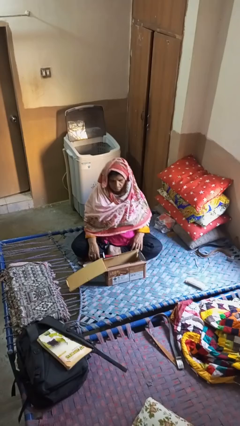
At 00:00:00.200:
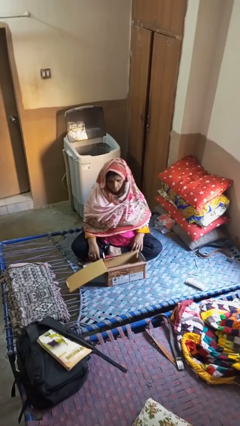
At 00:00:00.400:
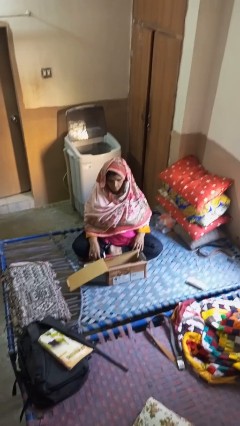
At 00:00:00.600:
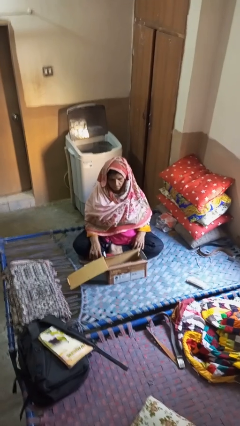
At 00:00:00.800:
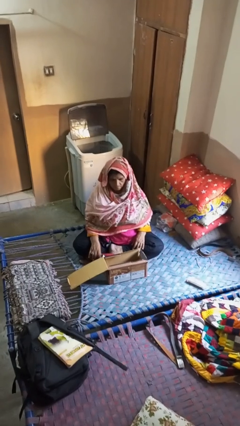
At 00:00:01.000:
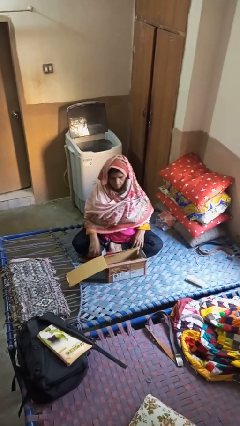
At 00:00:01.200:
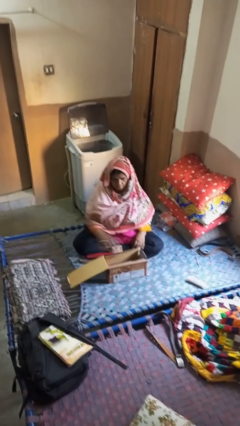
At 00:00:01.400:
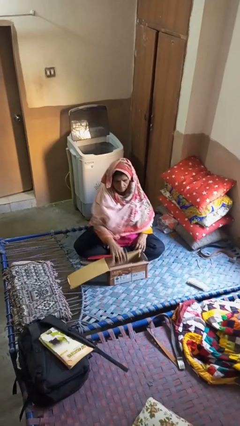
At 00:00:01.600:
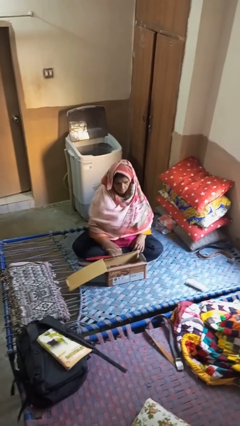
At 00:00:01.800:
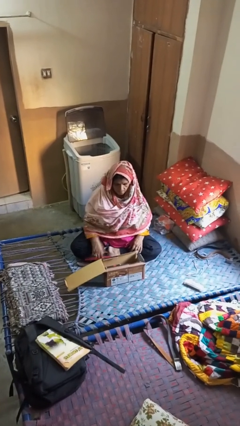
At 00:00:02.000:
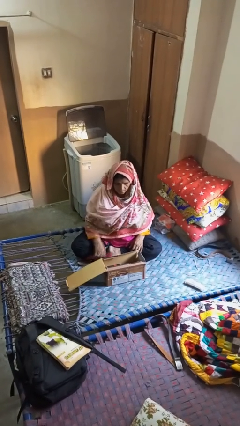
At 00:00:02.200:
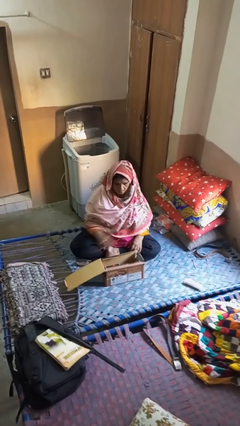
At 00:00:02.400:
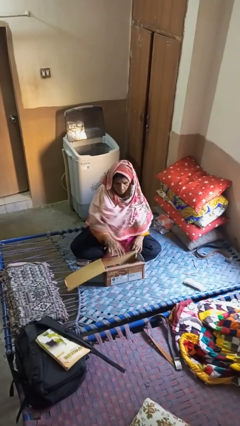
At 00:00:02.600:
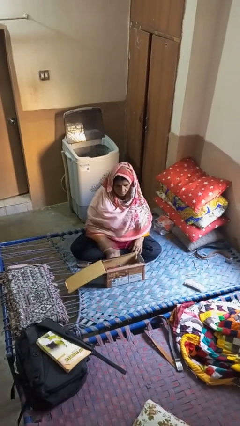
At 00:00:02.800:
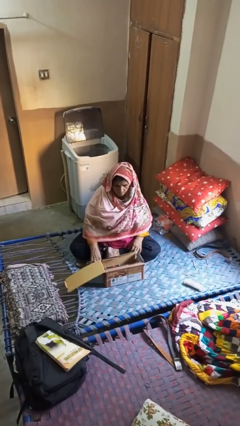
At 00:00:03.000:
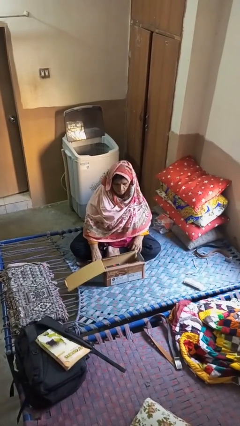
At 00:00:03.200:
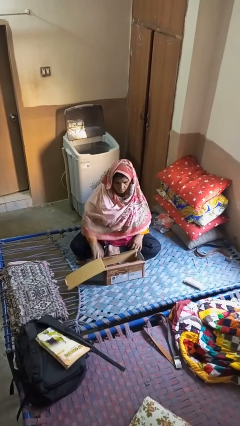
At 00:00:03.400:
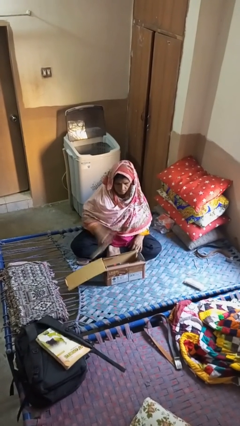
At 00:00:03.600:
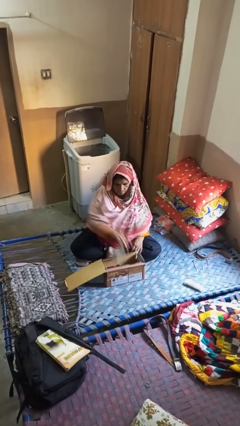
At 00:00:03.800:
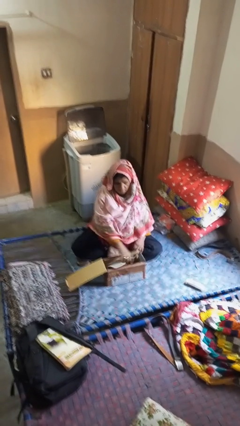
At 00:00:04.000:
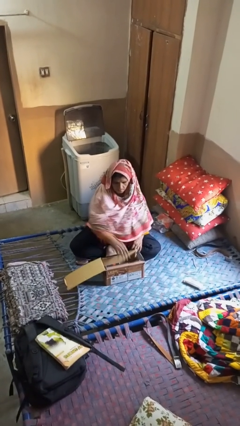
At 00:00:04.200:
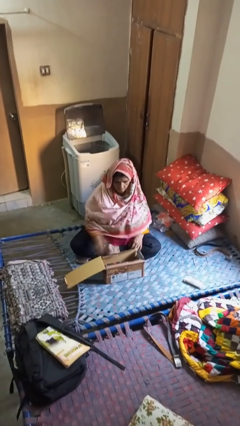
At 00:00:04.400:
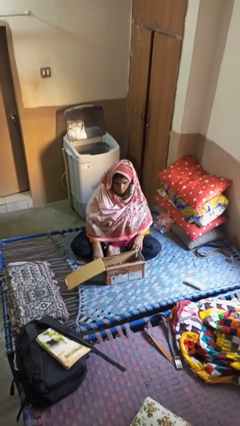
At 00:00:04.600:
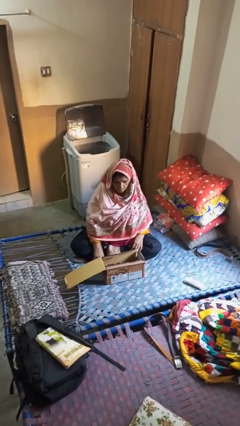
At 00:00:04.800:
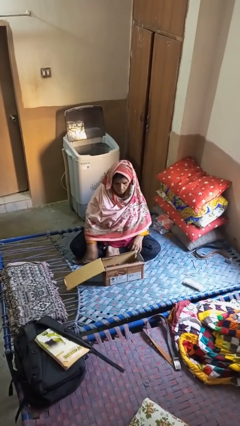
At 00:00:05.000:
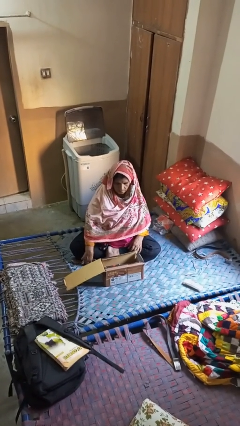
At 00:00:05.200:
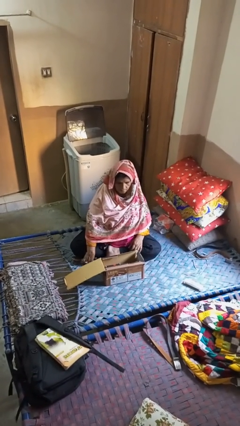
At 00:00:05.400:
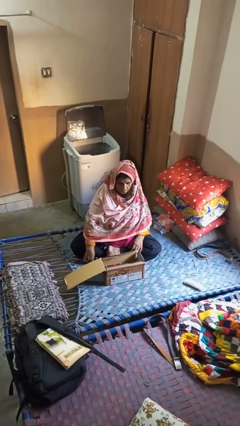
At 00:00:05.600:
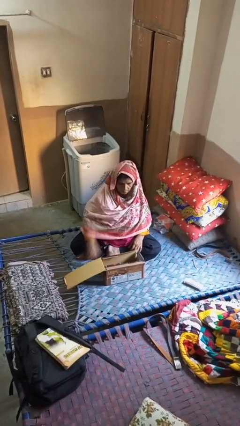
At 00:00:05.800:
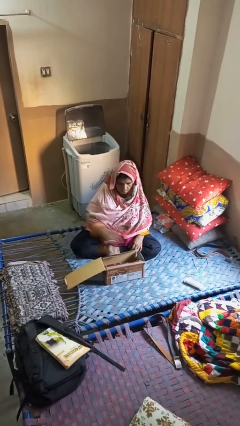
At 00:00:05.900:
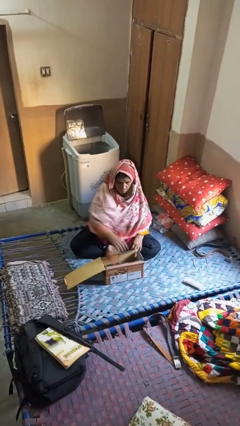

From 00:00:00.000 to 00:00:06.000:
person puts object into box

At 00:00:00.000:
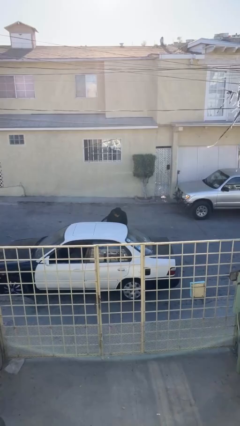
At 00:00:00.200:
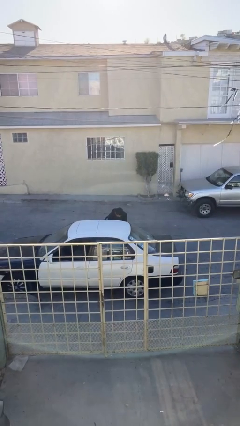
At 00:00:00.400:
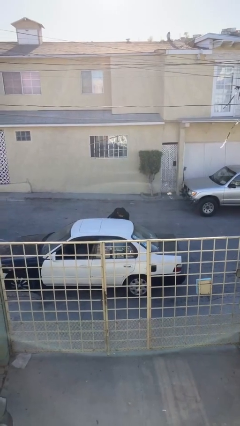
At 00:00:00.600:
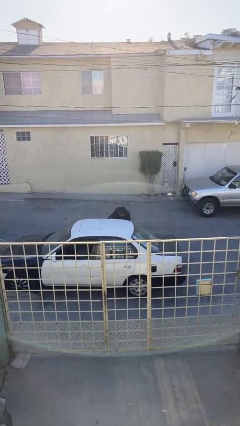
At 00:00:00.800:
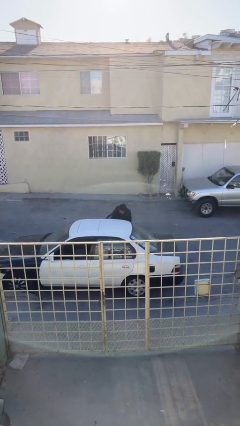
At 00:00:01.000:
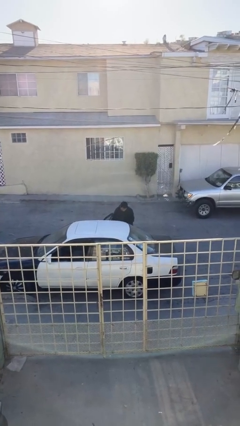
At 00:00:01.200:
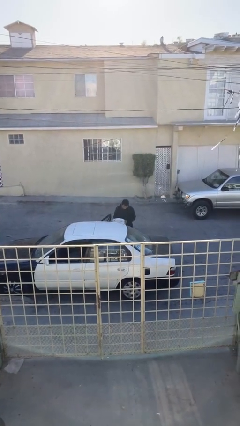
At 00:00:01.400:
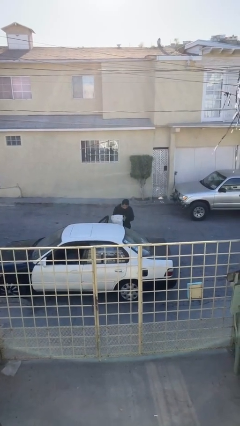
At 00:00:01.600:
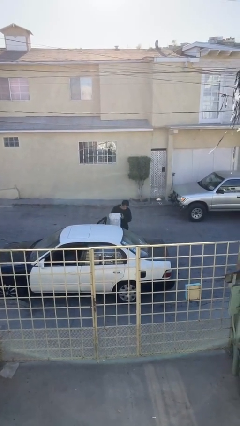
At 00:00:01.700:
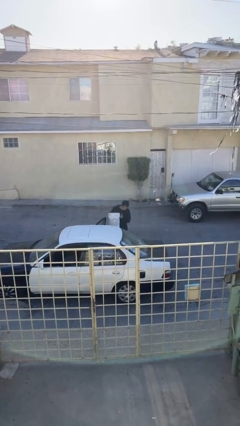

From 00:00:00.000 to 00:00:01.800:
person unloads car

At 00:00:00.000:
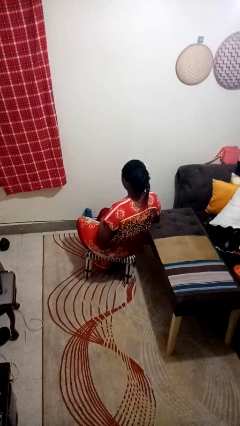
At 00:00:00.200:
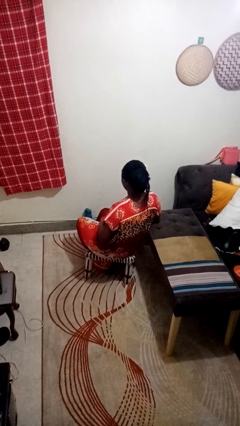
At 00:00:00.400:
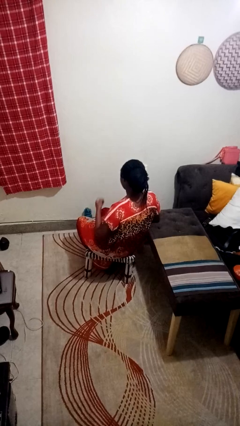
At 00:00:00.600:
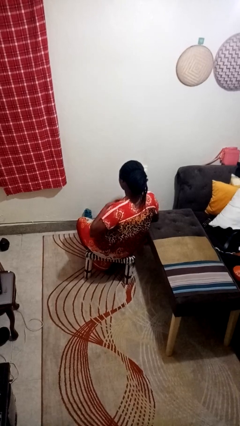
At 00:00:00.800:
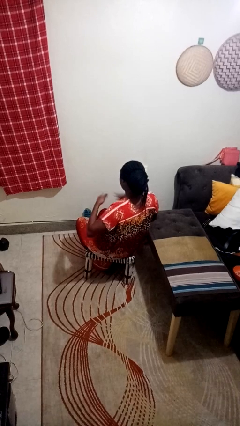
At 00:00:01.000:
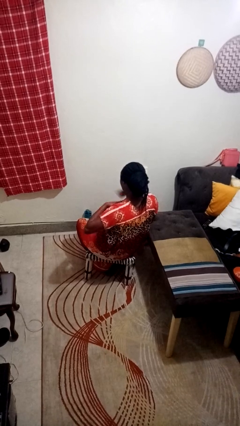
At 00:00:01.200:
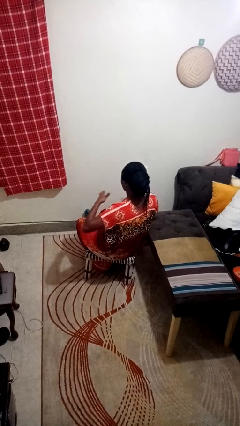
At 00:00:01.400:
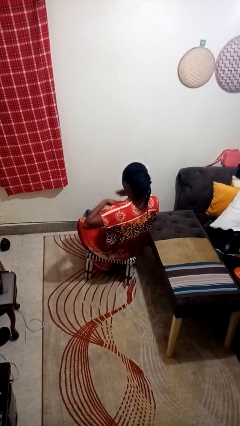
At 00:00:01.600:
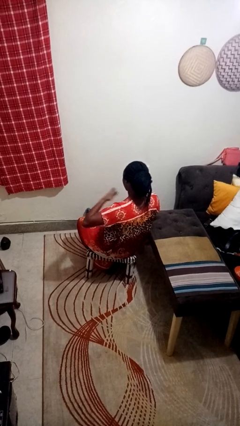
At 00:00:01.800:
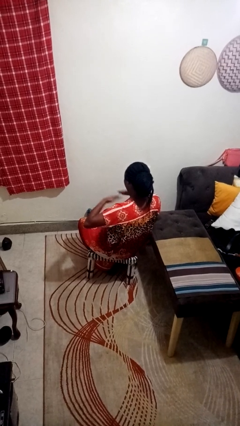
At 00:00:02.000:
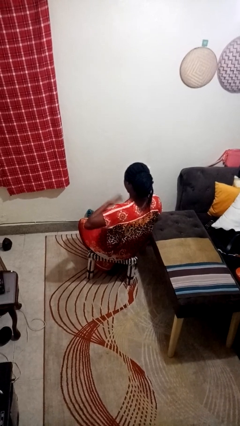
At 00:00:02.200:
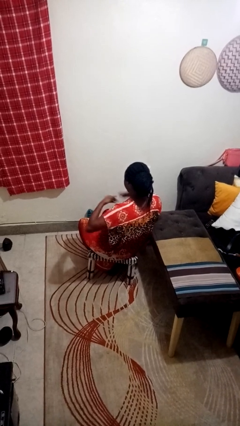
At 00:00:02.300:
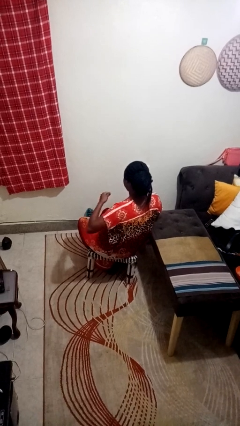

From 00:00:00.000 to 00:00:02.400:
person drums on chest

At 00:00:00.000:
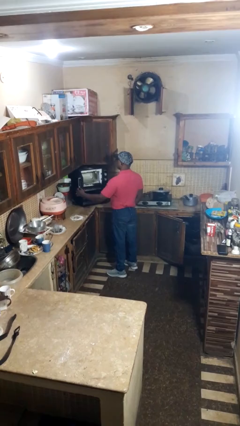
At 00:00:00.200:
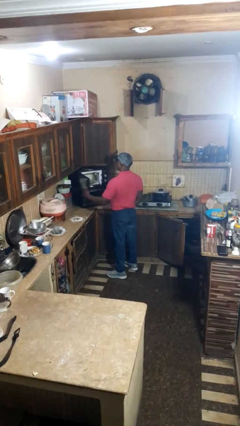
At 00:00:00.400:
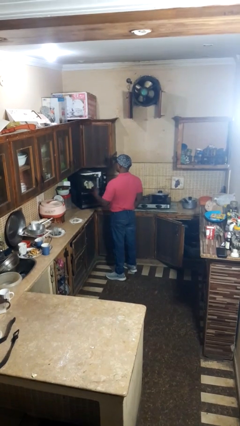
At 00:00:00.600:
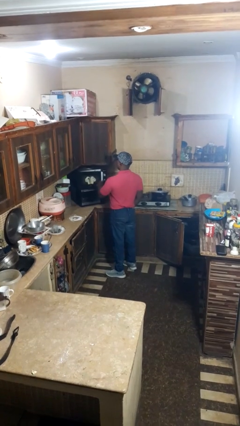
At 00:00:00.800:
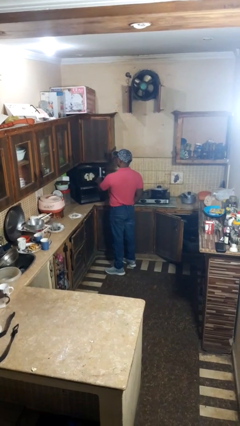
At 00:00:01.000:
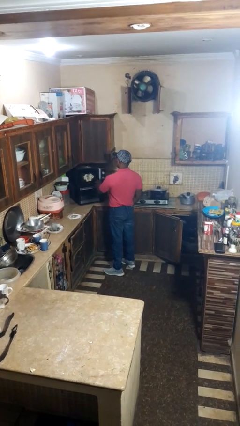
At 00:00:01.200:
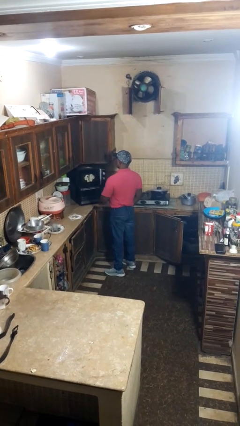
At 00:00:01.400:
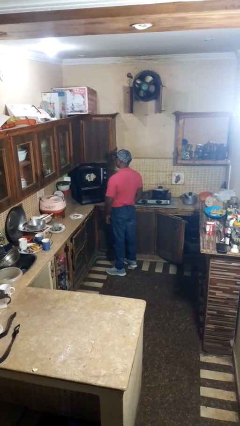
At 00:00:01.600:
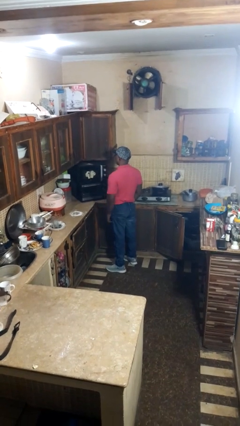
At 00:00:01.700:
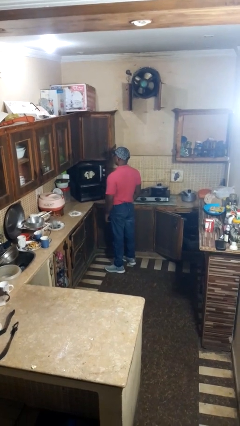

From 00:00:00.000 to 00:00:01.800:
person closes microwave

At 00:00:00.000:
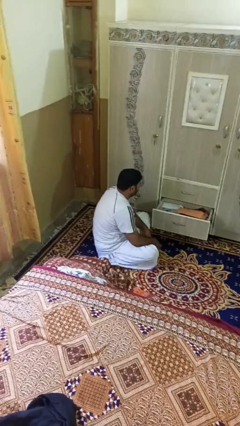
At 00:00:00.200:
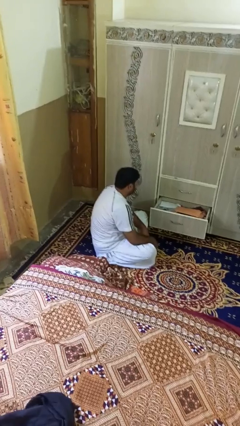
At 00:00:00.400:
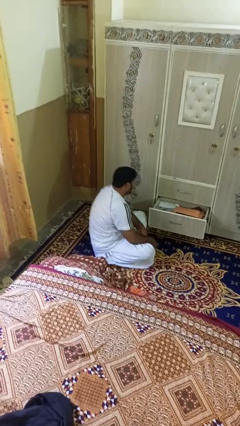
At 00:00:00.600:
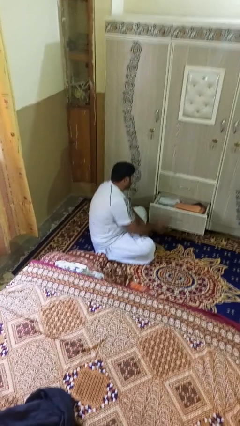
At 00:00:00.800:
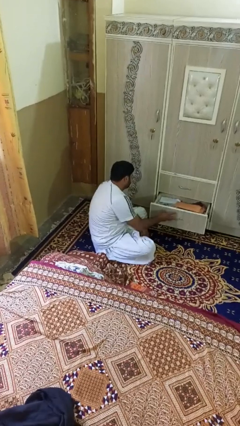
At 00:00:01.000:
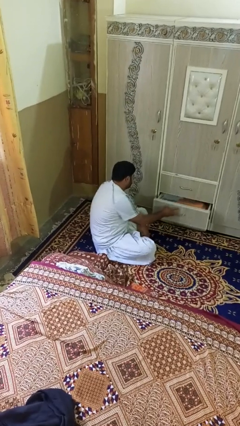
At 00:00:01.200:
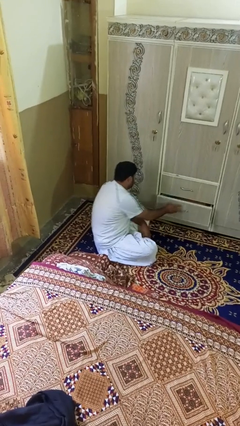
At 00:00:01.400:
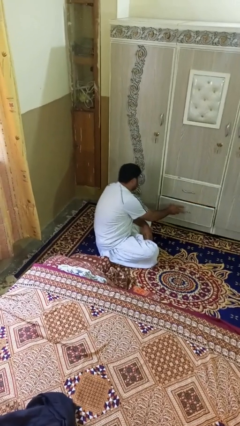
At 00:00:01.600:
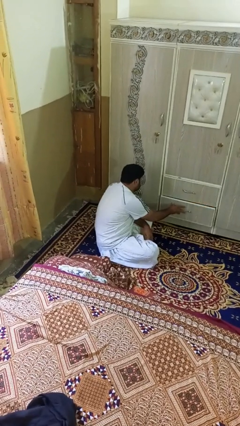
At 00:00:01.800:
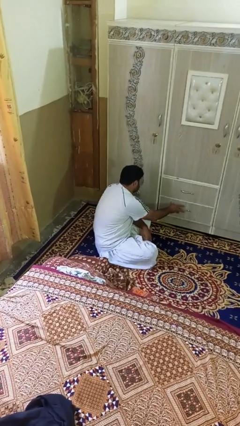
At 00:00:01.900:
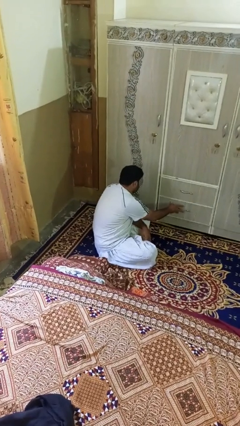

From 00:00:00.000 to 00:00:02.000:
person closes dresser drawer

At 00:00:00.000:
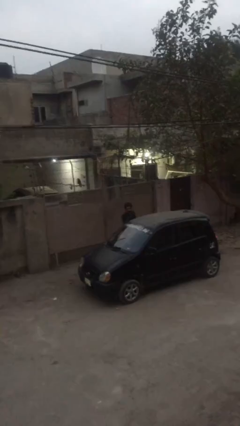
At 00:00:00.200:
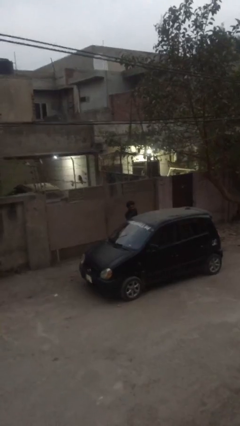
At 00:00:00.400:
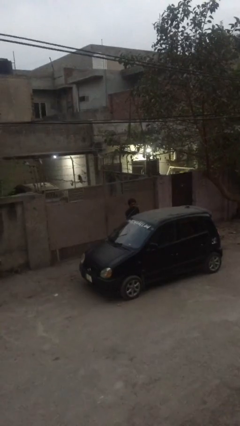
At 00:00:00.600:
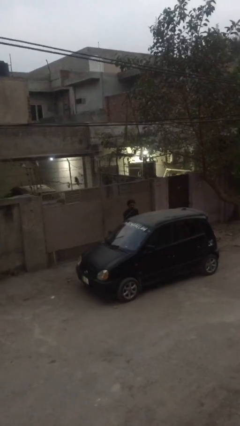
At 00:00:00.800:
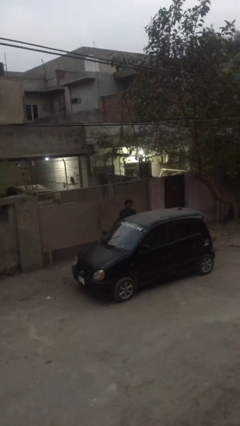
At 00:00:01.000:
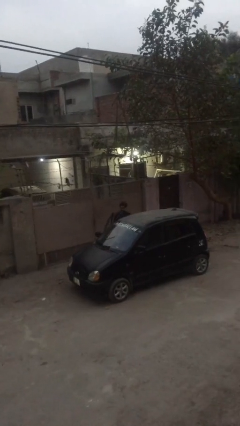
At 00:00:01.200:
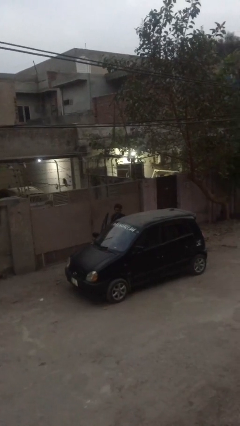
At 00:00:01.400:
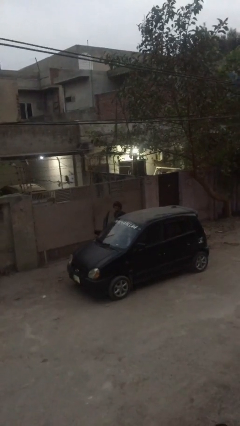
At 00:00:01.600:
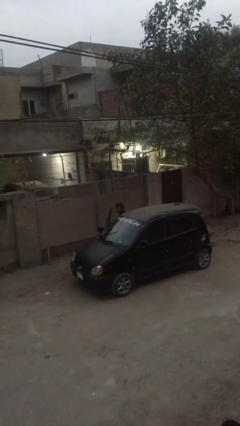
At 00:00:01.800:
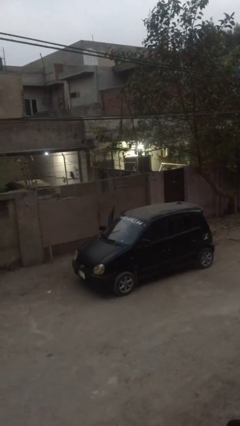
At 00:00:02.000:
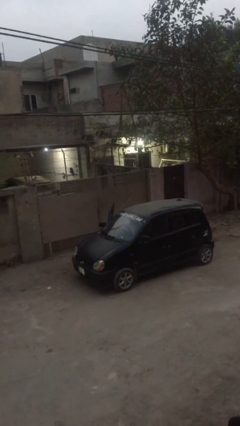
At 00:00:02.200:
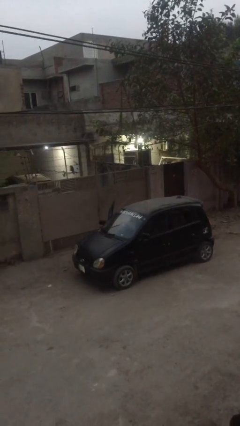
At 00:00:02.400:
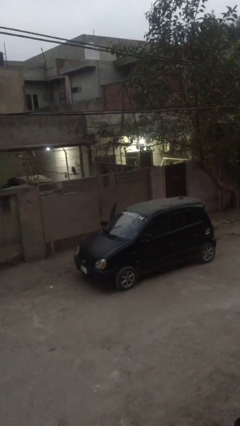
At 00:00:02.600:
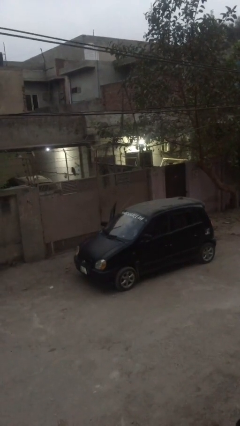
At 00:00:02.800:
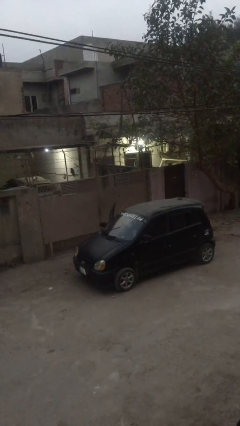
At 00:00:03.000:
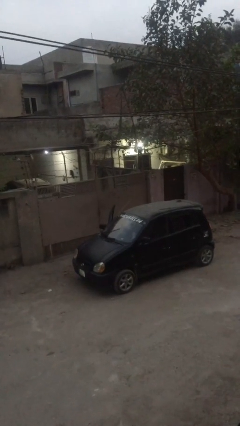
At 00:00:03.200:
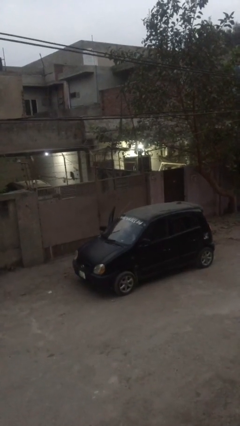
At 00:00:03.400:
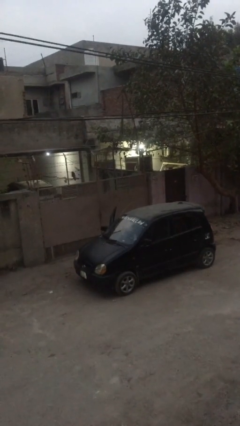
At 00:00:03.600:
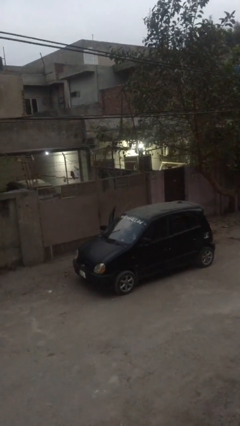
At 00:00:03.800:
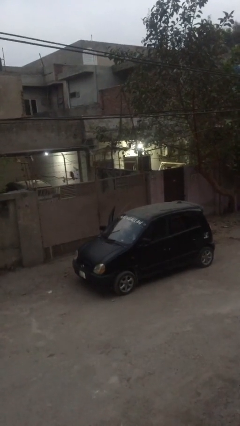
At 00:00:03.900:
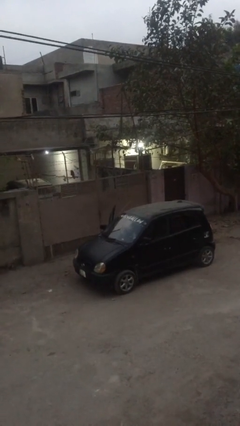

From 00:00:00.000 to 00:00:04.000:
person enters car
